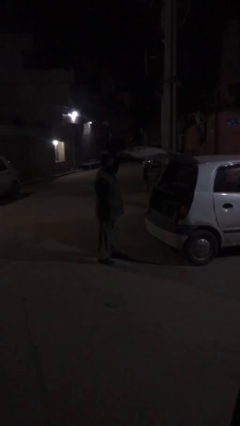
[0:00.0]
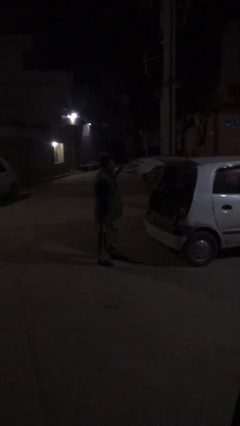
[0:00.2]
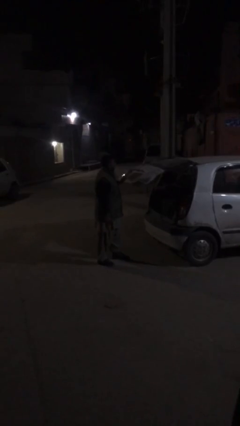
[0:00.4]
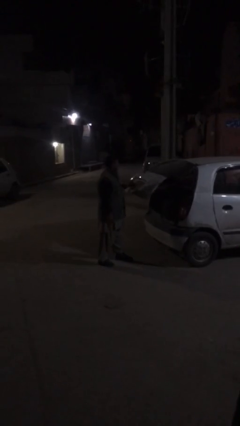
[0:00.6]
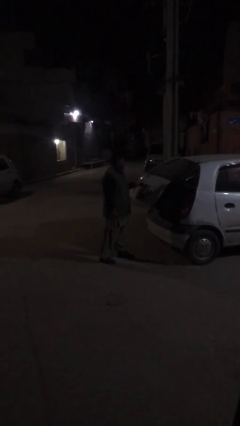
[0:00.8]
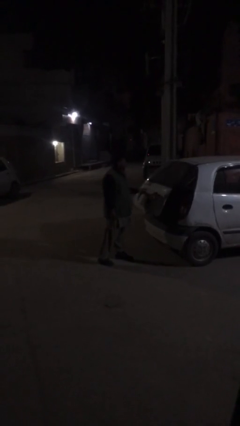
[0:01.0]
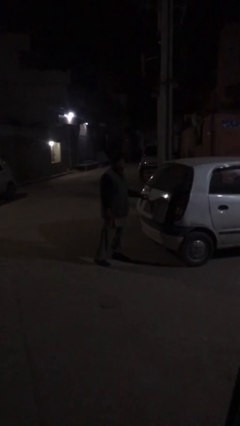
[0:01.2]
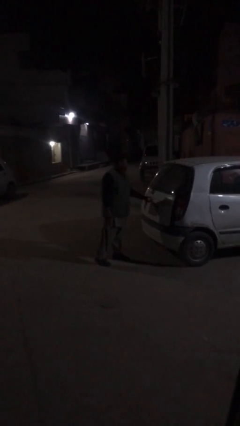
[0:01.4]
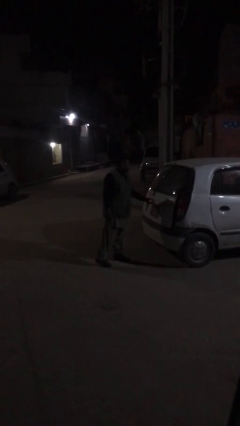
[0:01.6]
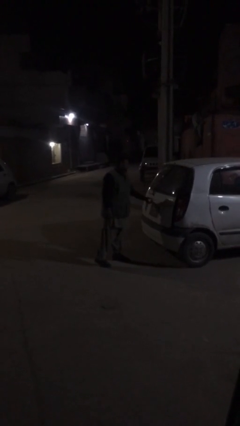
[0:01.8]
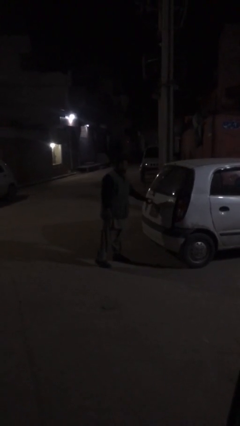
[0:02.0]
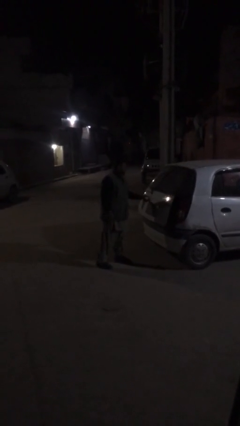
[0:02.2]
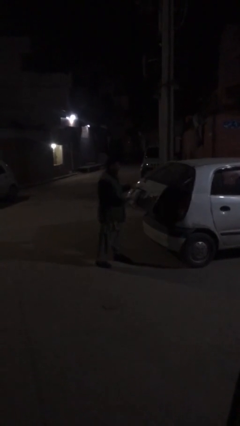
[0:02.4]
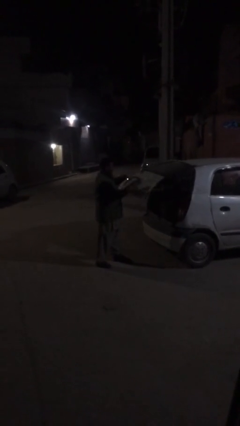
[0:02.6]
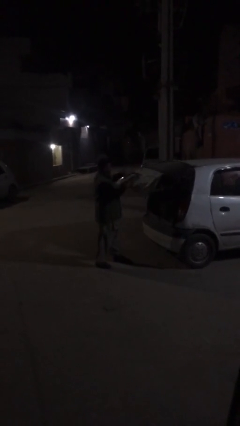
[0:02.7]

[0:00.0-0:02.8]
person closes car trunk

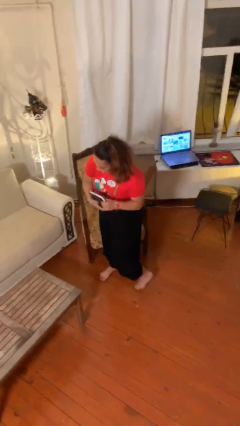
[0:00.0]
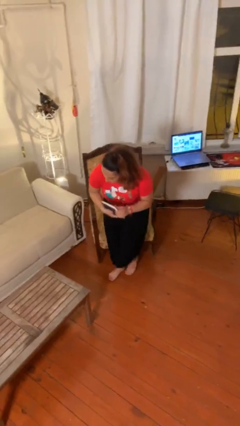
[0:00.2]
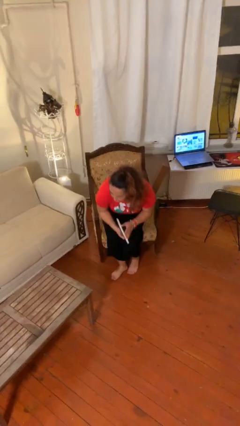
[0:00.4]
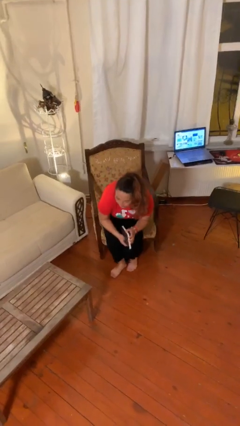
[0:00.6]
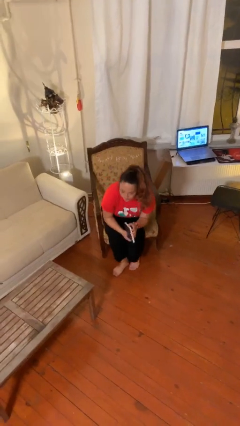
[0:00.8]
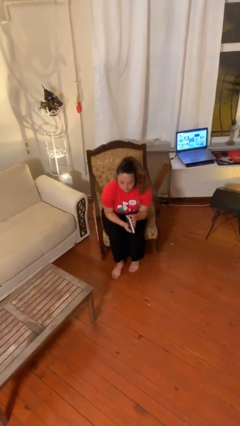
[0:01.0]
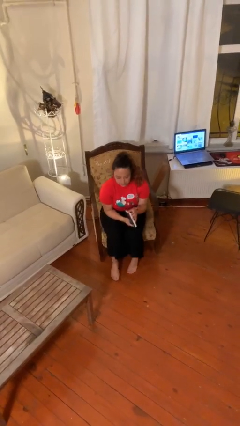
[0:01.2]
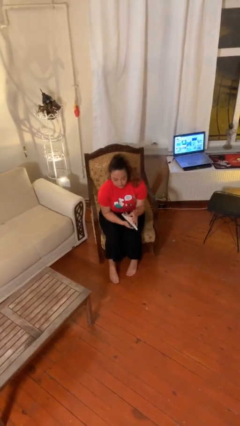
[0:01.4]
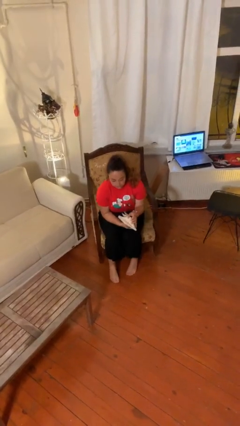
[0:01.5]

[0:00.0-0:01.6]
person sits down

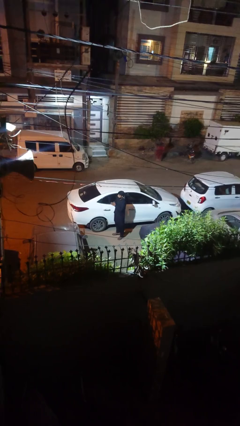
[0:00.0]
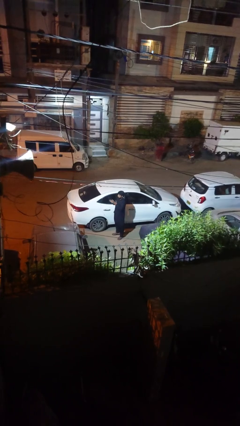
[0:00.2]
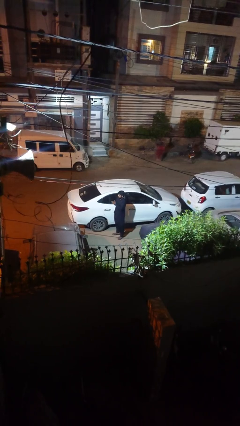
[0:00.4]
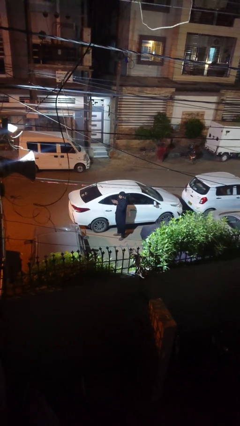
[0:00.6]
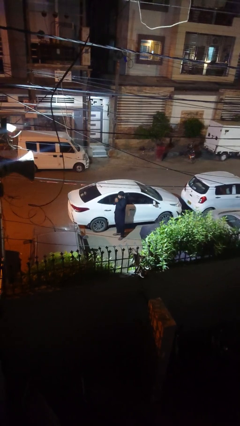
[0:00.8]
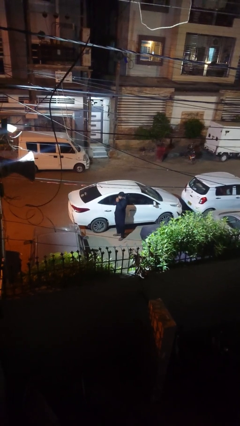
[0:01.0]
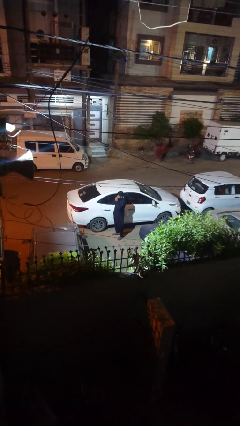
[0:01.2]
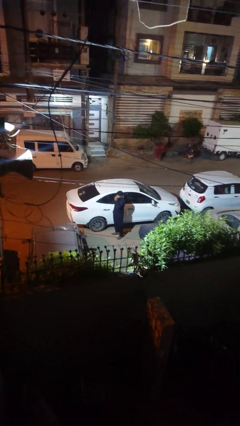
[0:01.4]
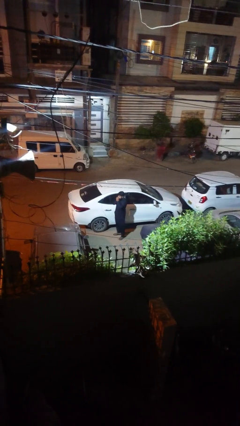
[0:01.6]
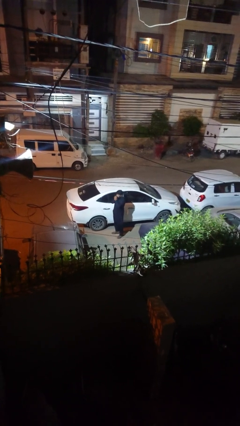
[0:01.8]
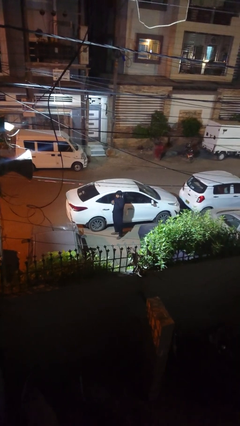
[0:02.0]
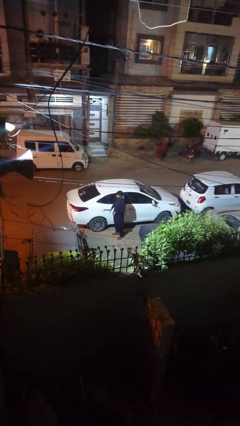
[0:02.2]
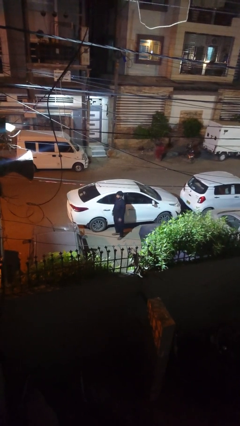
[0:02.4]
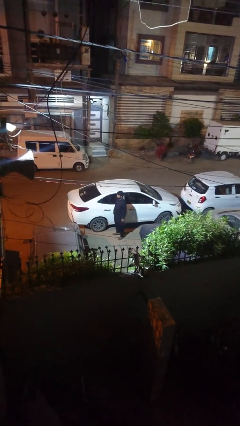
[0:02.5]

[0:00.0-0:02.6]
person blows into hands

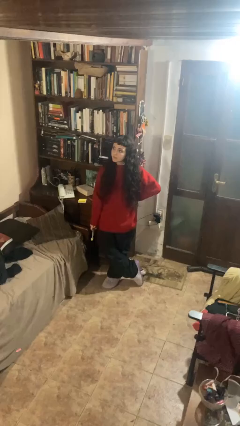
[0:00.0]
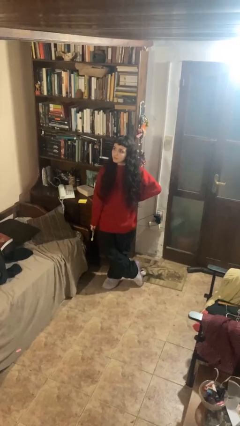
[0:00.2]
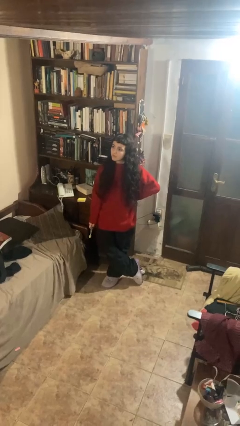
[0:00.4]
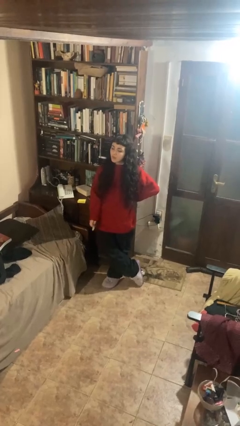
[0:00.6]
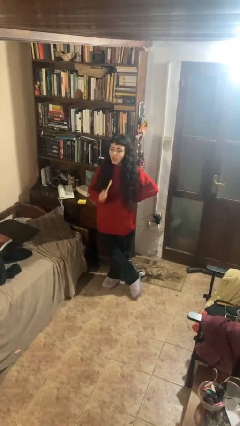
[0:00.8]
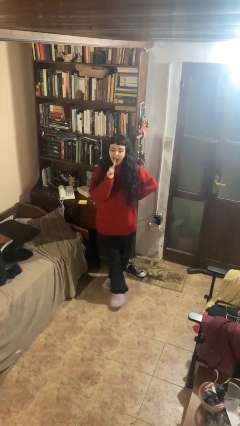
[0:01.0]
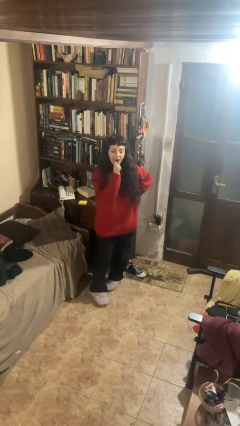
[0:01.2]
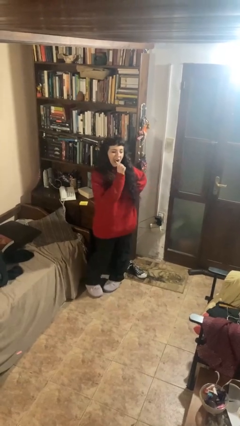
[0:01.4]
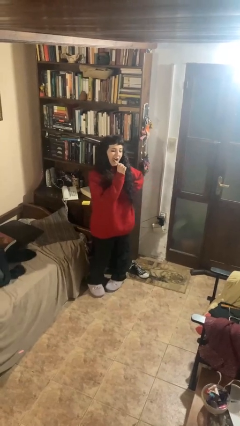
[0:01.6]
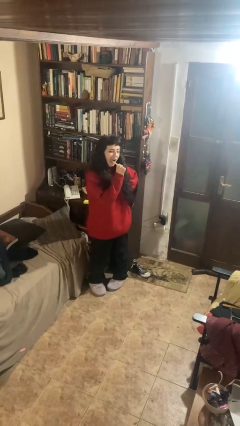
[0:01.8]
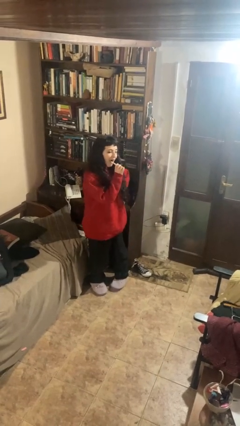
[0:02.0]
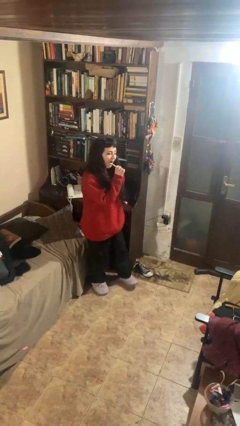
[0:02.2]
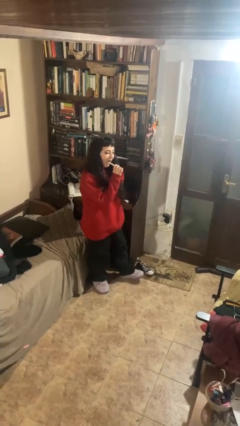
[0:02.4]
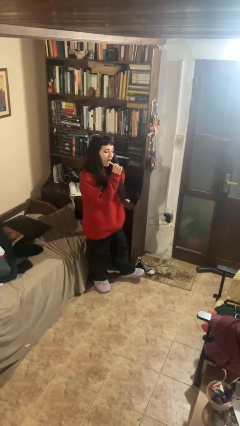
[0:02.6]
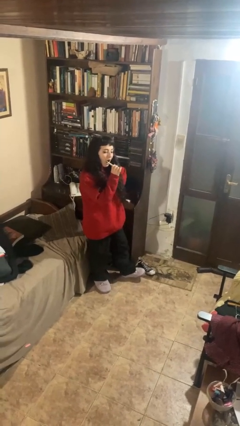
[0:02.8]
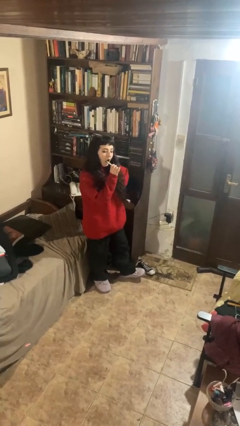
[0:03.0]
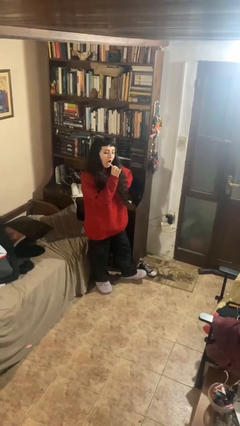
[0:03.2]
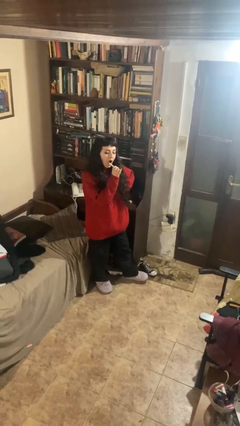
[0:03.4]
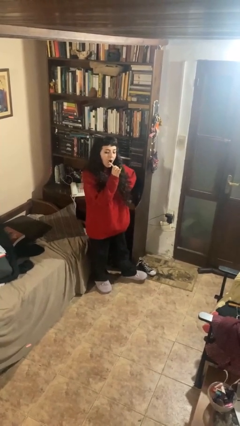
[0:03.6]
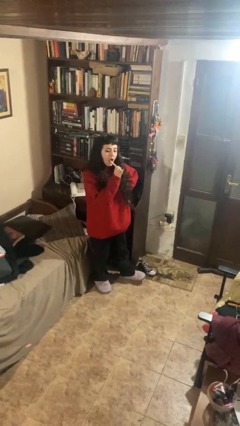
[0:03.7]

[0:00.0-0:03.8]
person brushes teeth

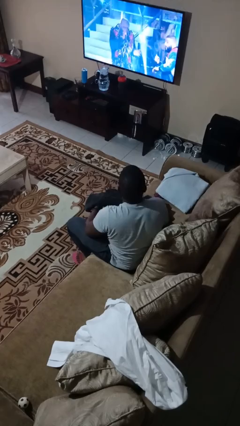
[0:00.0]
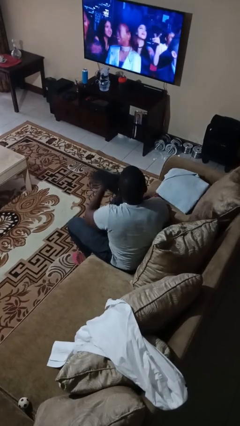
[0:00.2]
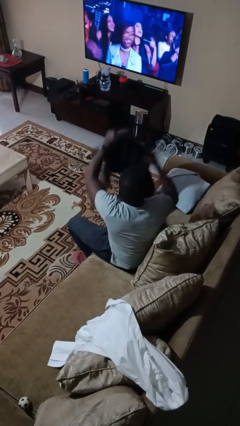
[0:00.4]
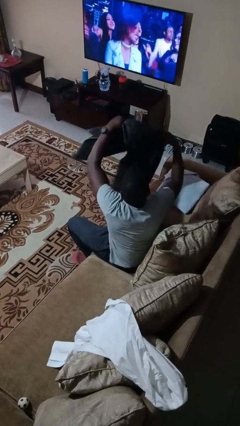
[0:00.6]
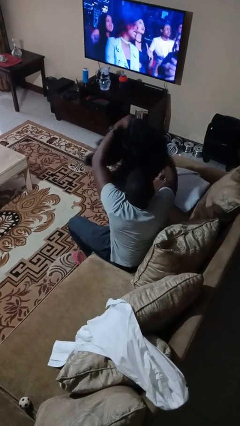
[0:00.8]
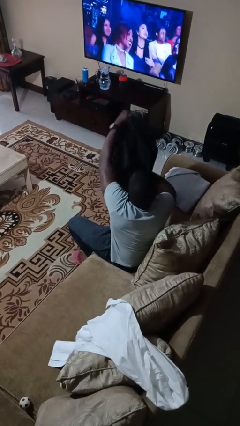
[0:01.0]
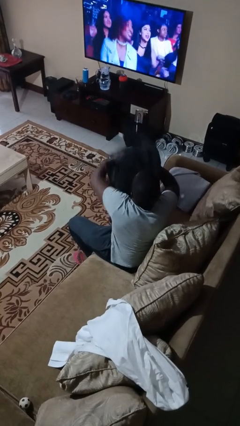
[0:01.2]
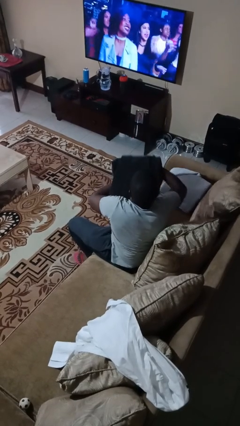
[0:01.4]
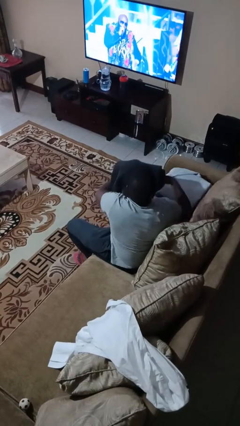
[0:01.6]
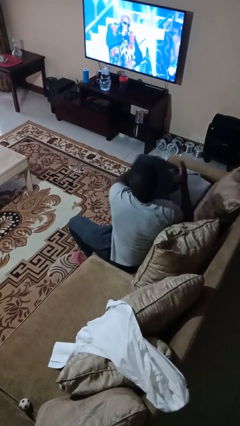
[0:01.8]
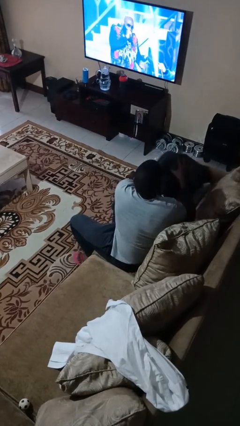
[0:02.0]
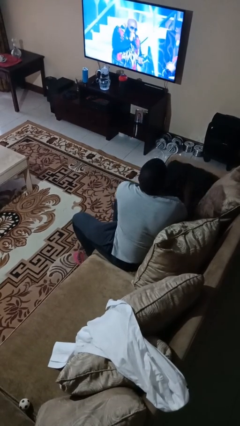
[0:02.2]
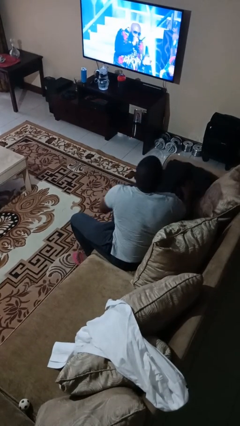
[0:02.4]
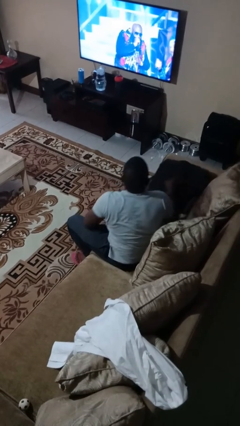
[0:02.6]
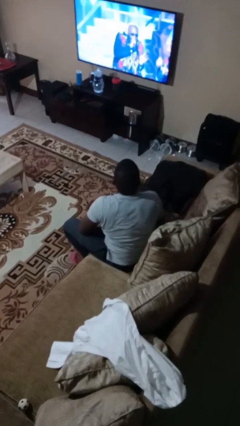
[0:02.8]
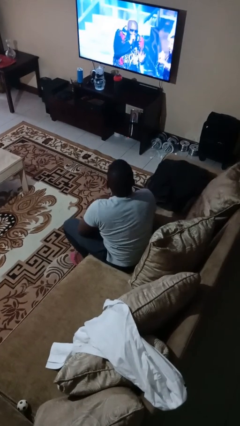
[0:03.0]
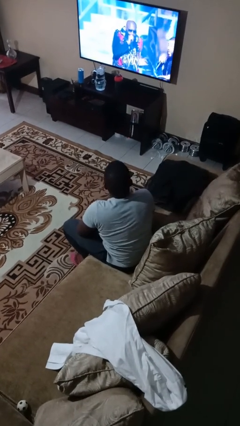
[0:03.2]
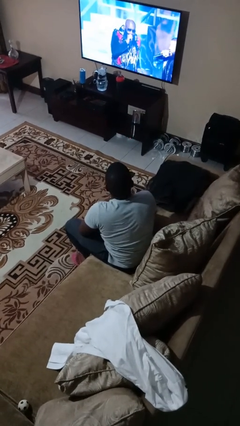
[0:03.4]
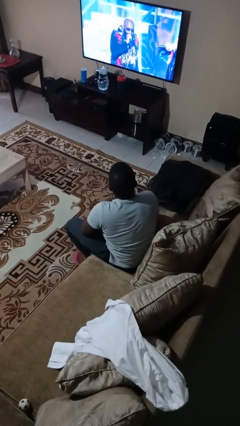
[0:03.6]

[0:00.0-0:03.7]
person folds towel

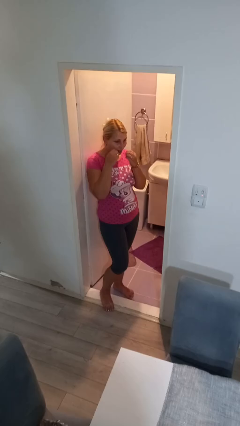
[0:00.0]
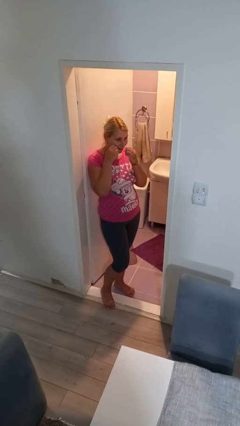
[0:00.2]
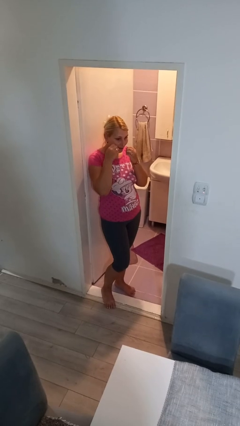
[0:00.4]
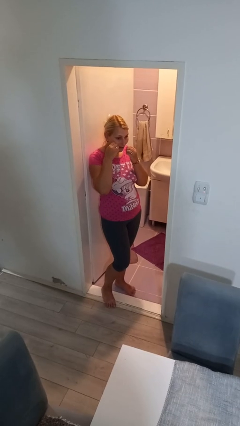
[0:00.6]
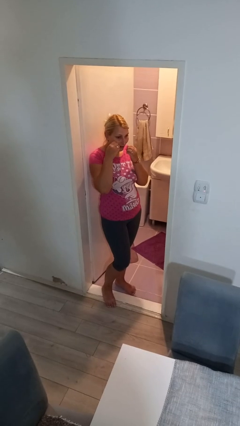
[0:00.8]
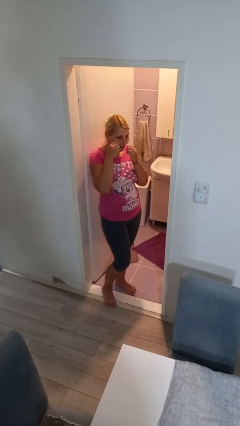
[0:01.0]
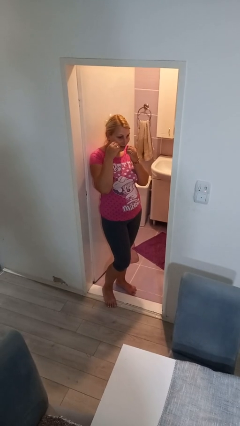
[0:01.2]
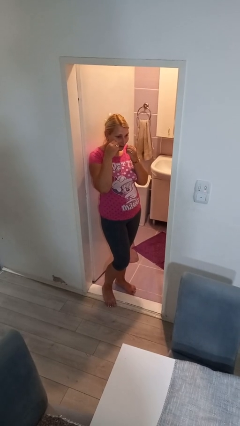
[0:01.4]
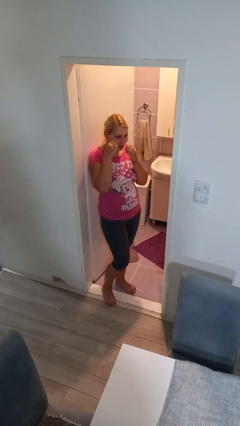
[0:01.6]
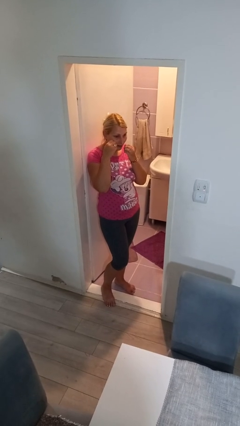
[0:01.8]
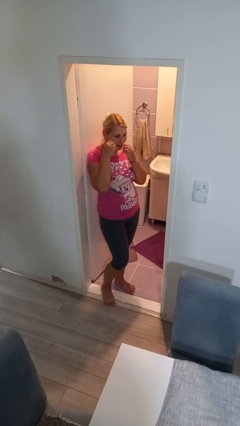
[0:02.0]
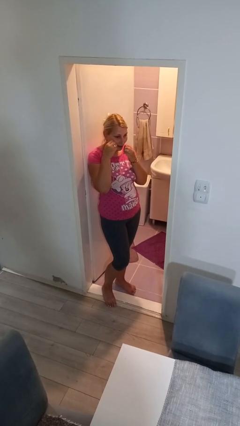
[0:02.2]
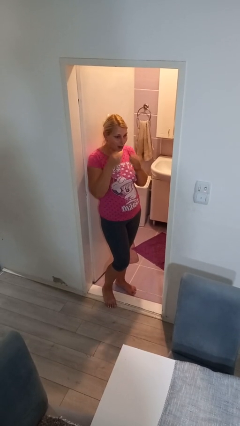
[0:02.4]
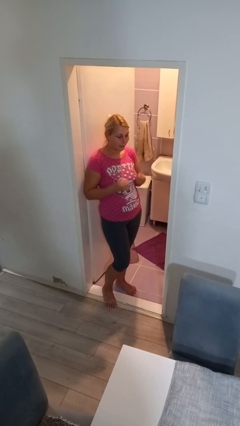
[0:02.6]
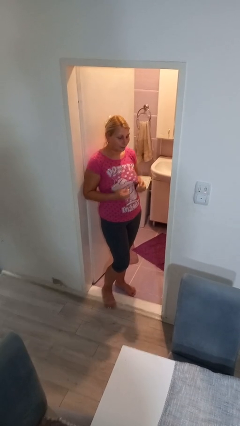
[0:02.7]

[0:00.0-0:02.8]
person flosses

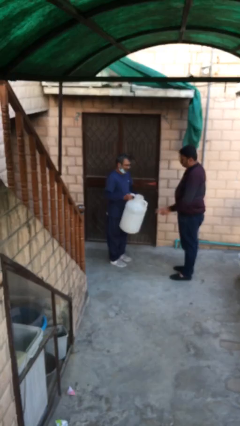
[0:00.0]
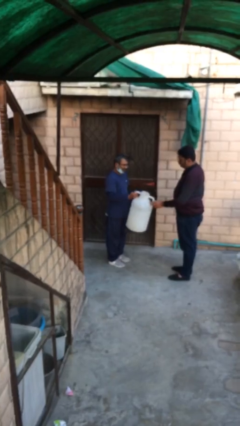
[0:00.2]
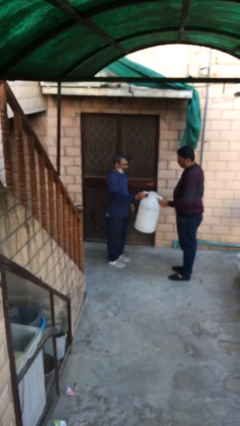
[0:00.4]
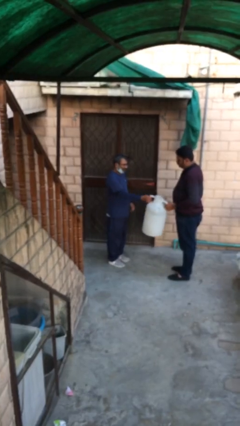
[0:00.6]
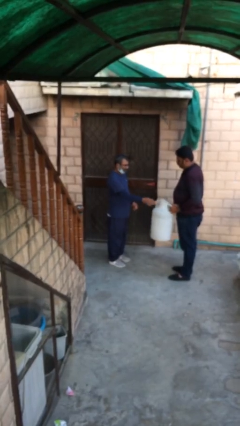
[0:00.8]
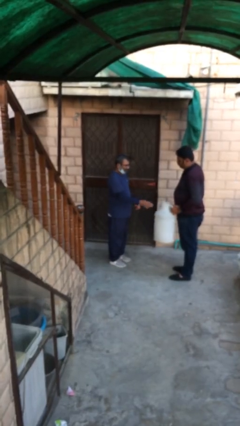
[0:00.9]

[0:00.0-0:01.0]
person transfers object to person
